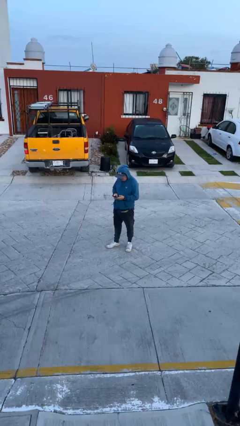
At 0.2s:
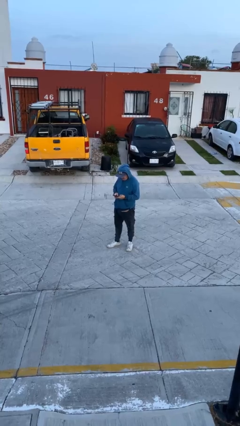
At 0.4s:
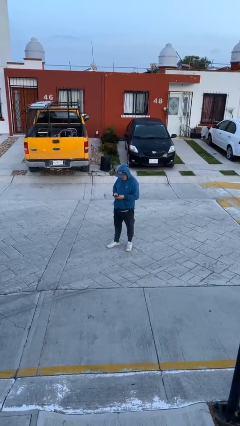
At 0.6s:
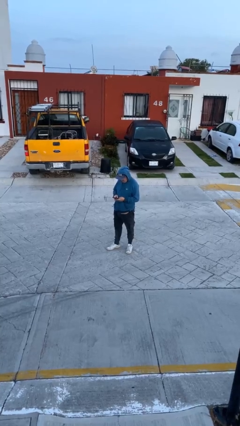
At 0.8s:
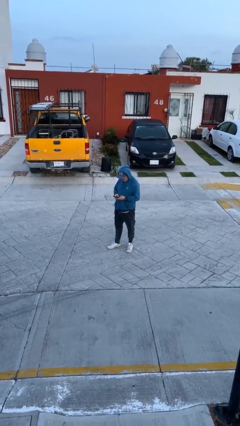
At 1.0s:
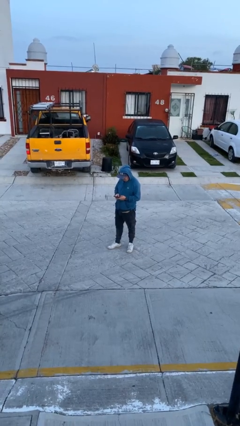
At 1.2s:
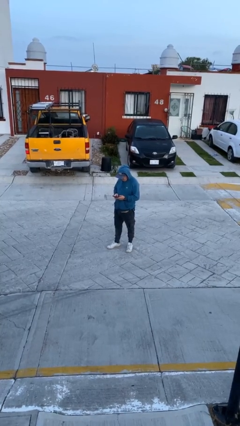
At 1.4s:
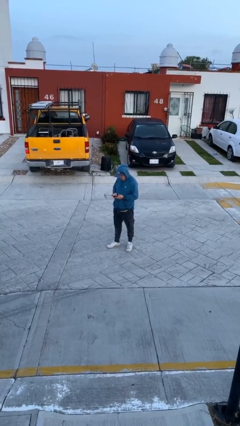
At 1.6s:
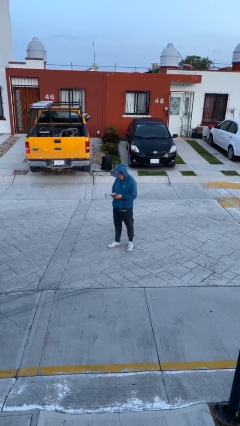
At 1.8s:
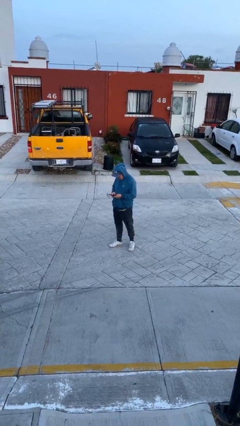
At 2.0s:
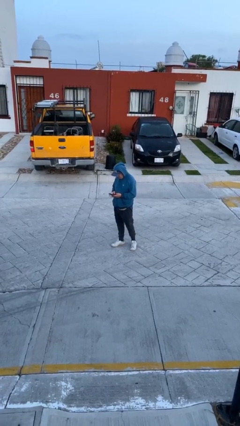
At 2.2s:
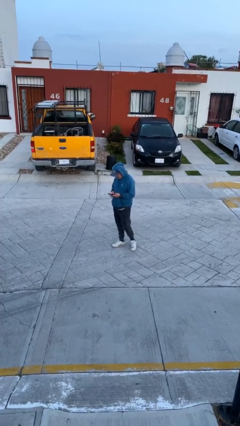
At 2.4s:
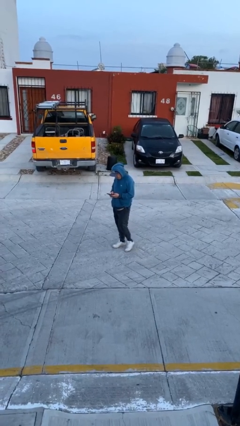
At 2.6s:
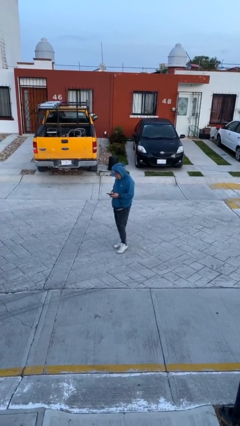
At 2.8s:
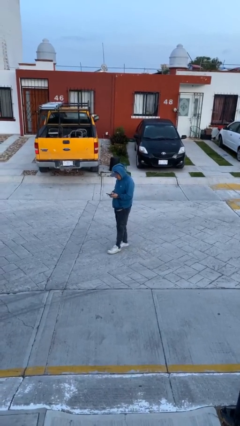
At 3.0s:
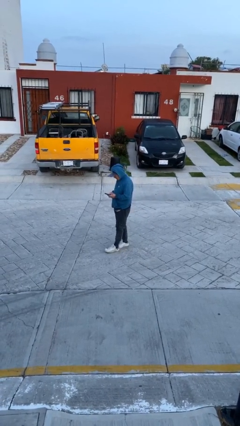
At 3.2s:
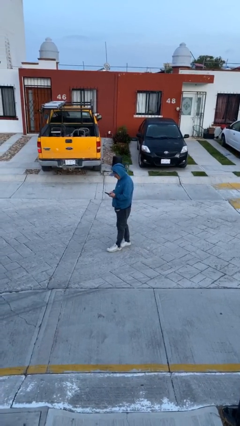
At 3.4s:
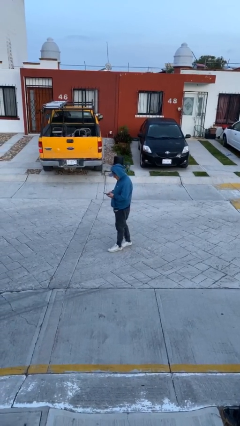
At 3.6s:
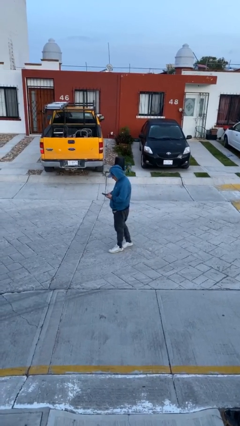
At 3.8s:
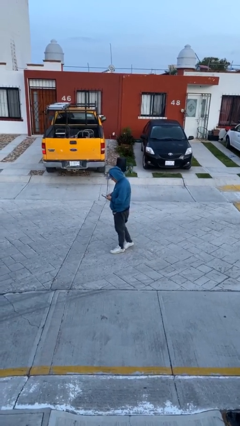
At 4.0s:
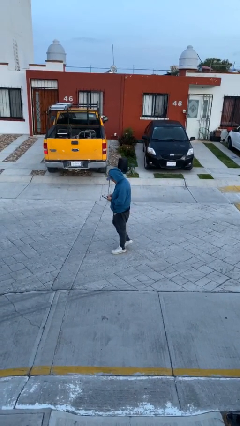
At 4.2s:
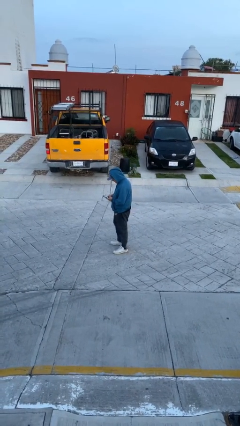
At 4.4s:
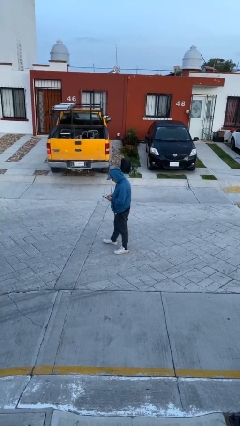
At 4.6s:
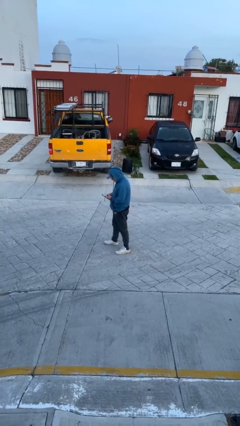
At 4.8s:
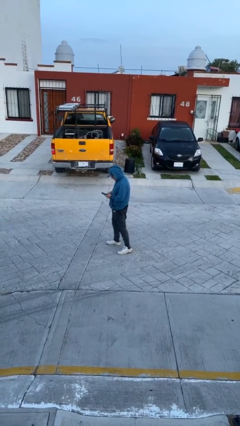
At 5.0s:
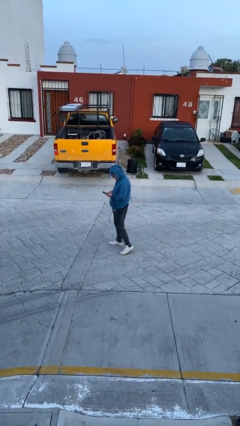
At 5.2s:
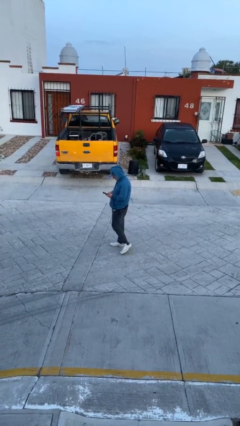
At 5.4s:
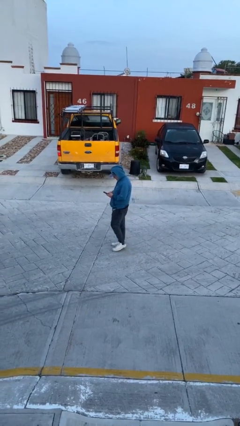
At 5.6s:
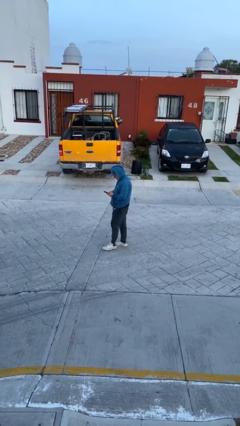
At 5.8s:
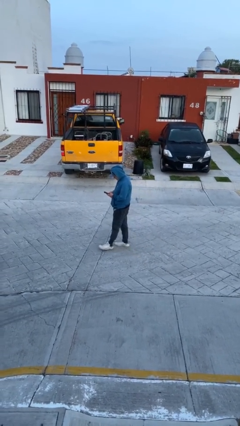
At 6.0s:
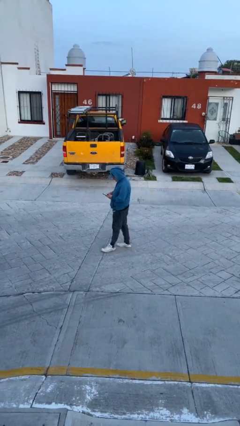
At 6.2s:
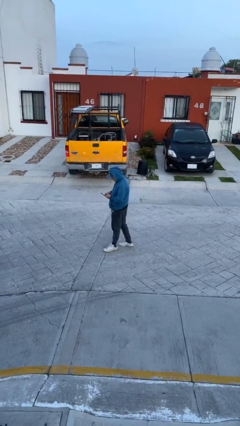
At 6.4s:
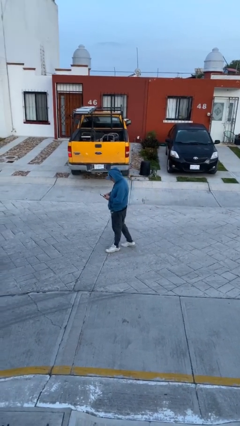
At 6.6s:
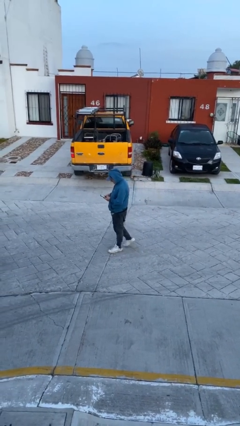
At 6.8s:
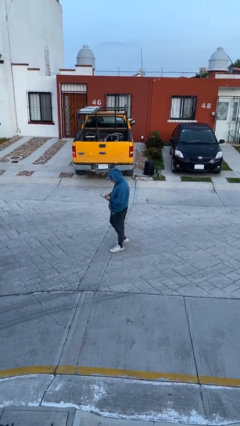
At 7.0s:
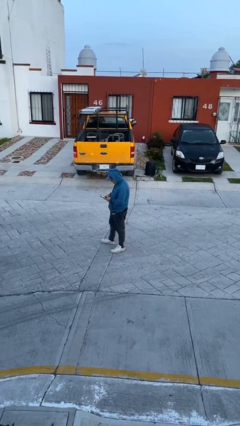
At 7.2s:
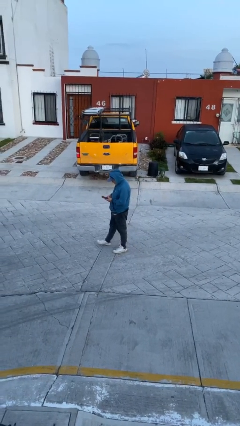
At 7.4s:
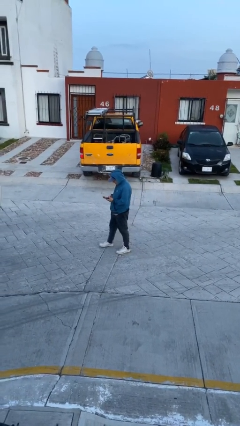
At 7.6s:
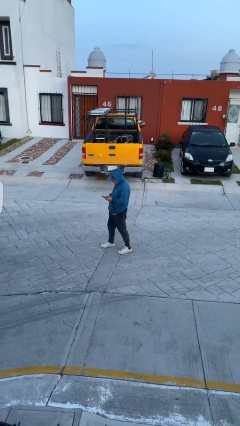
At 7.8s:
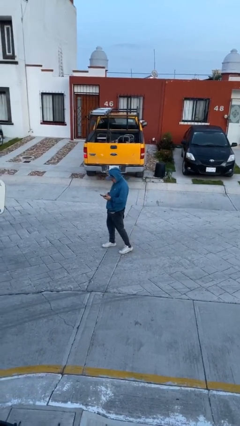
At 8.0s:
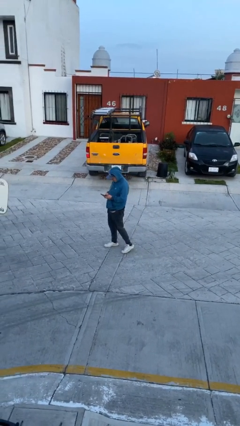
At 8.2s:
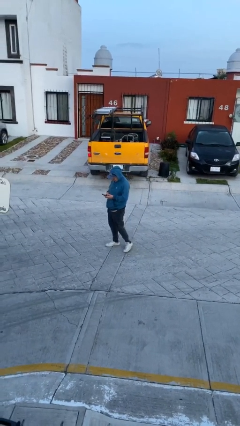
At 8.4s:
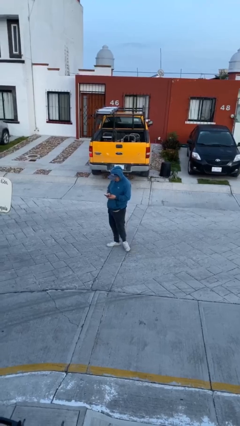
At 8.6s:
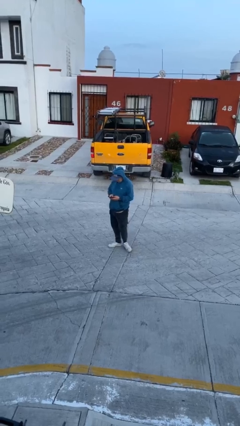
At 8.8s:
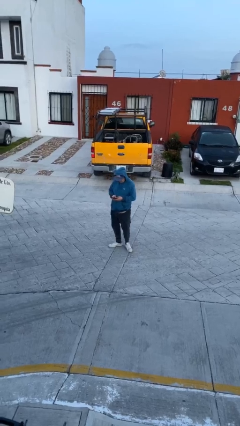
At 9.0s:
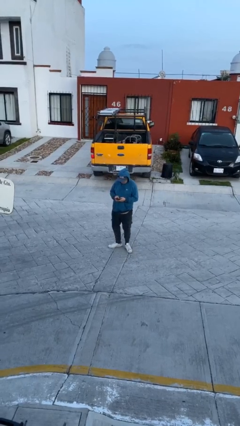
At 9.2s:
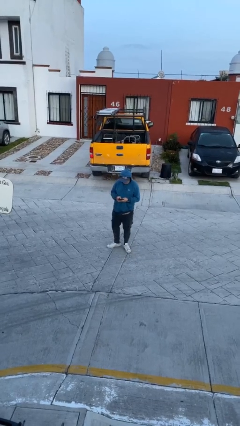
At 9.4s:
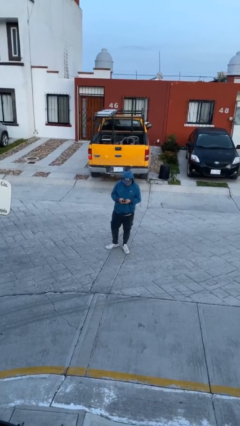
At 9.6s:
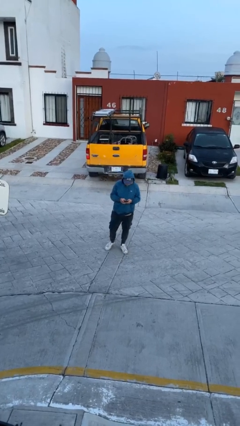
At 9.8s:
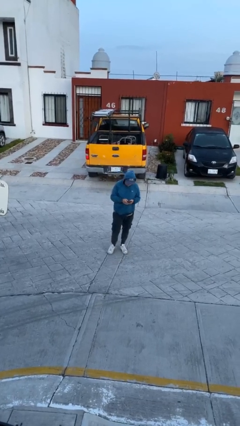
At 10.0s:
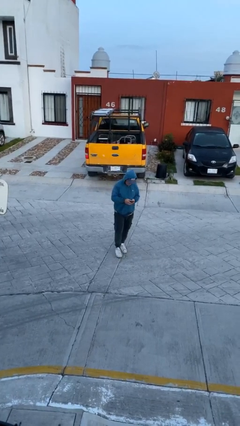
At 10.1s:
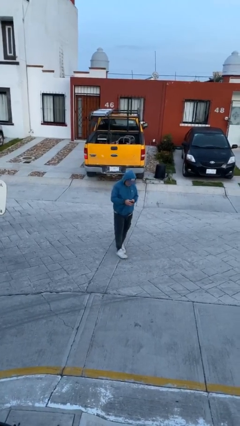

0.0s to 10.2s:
person texts on phone

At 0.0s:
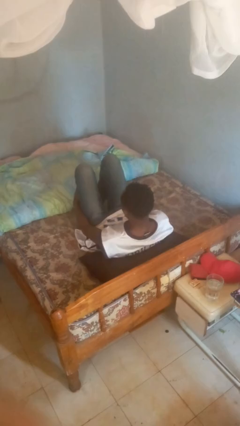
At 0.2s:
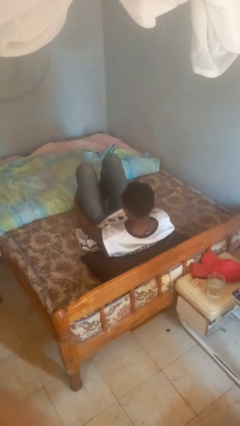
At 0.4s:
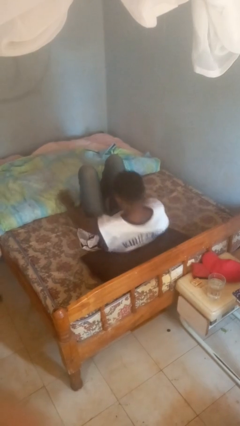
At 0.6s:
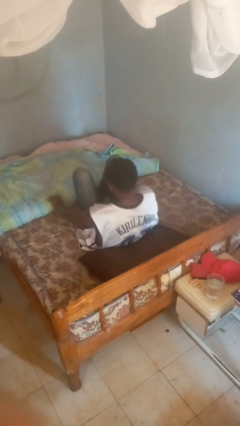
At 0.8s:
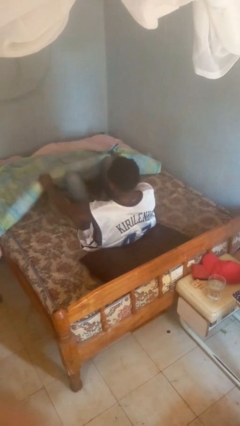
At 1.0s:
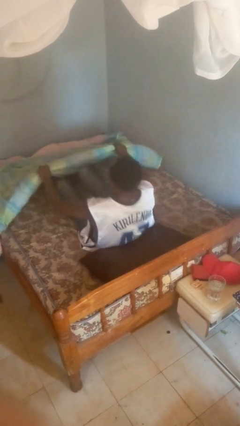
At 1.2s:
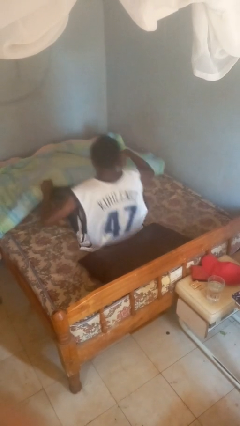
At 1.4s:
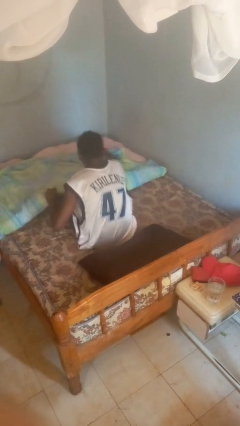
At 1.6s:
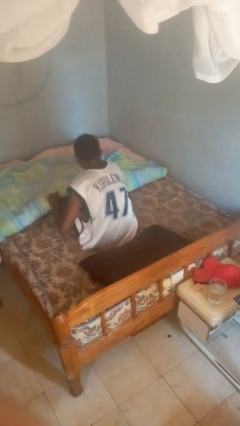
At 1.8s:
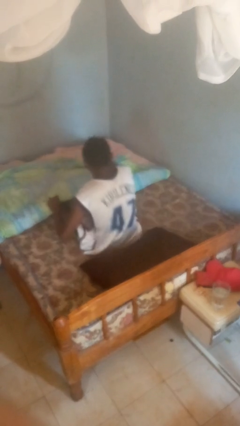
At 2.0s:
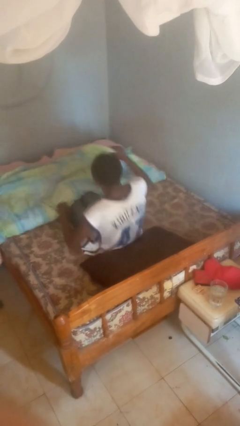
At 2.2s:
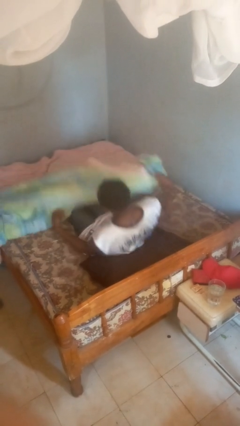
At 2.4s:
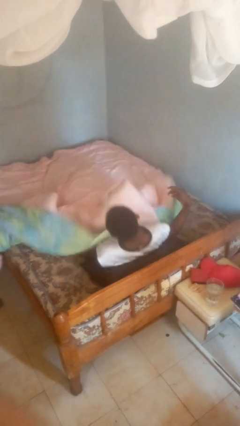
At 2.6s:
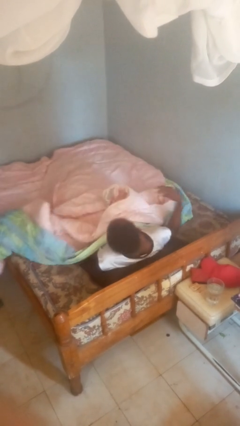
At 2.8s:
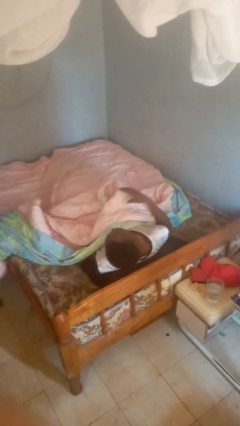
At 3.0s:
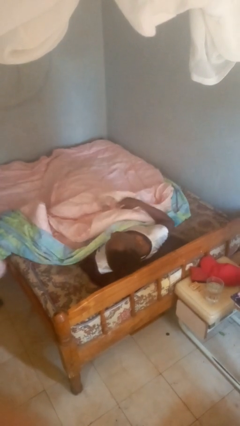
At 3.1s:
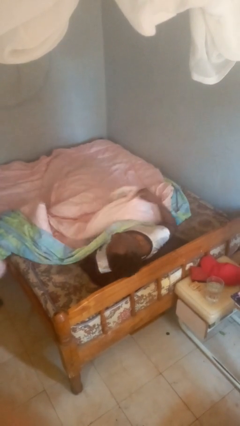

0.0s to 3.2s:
person covers with bedsheets

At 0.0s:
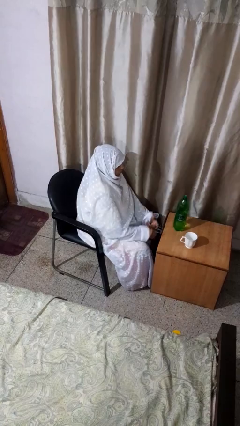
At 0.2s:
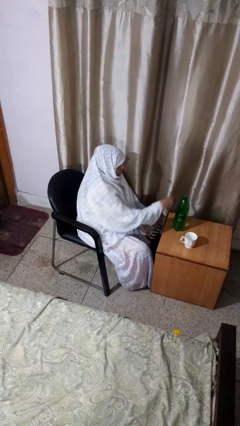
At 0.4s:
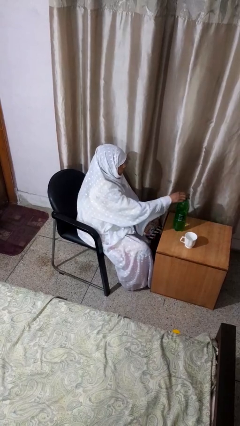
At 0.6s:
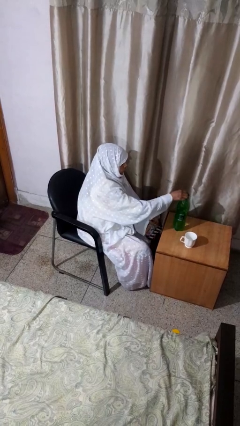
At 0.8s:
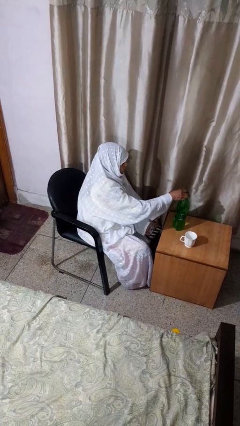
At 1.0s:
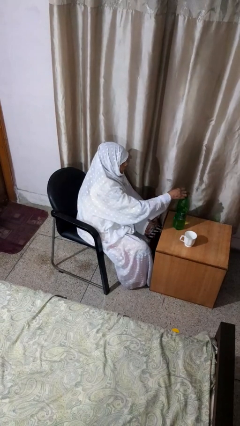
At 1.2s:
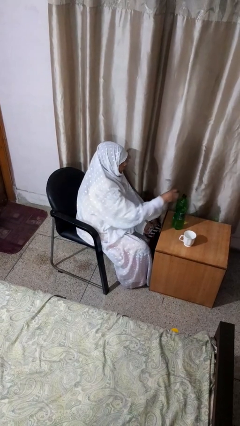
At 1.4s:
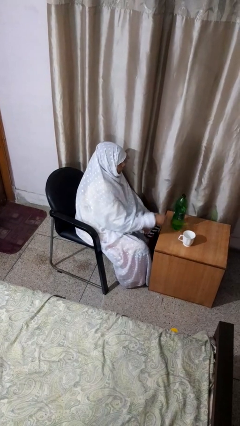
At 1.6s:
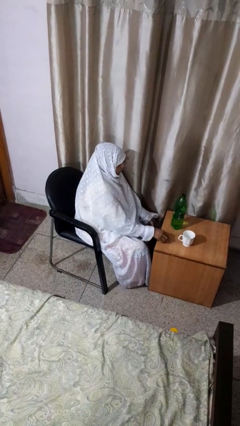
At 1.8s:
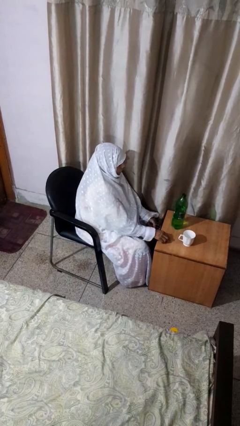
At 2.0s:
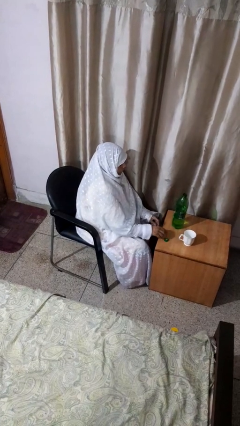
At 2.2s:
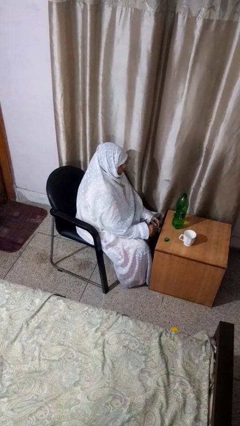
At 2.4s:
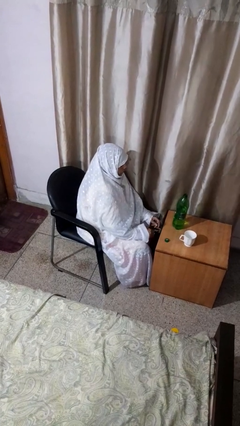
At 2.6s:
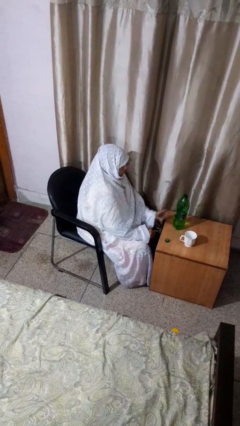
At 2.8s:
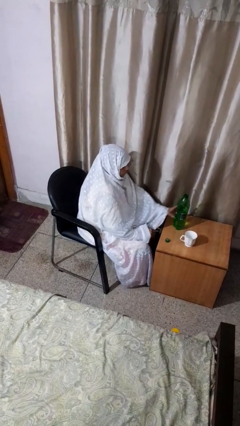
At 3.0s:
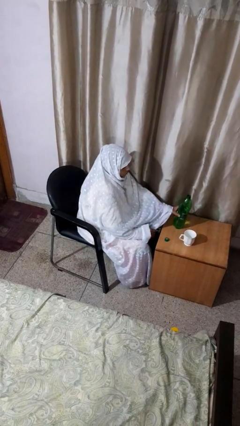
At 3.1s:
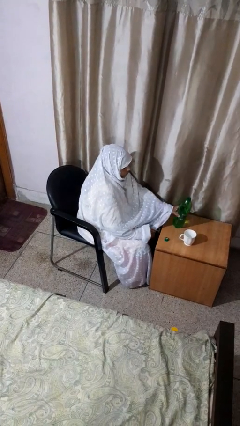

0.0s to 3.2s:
person unscrews lid from bottle

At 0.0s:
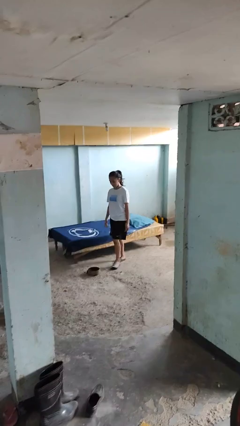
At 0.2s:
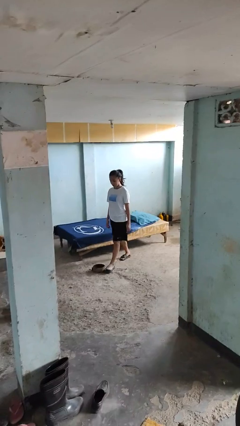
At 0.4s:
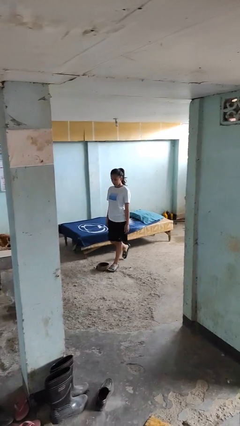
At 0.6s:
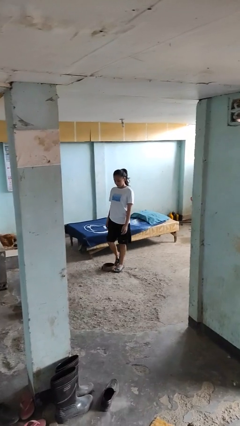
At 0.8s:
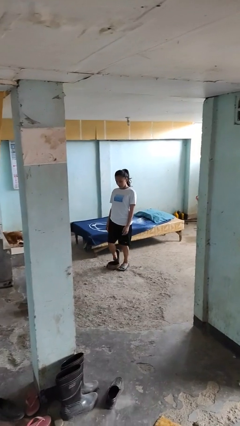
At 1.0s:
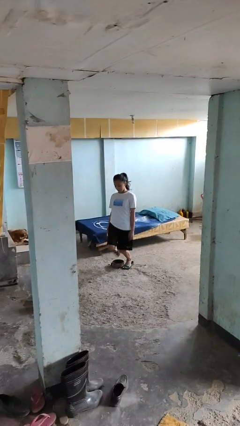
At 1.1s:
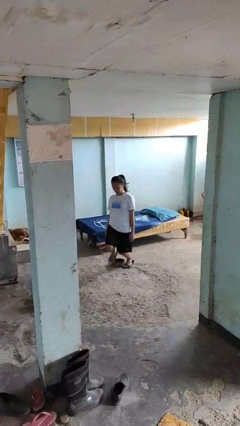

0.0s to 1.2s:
person trips on object on floor

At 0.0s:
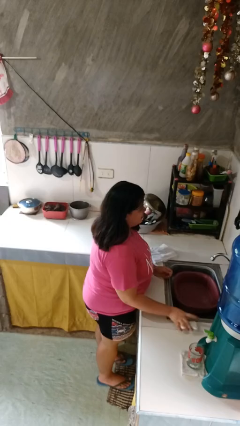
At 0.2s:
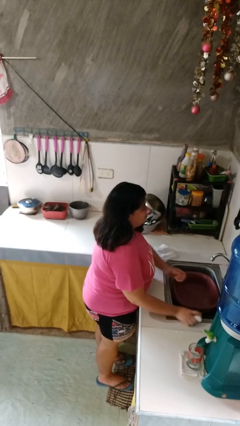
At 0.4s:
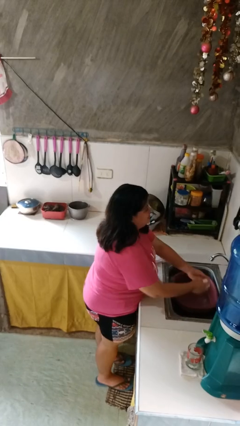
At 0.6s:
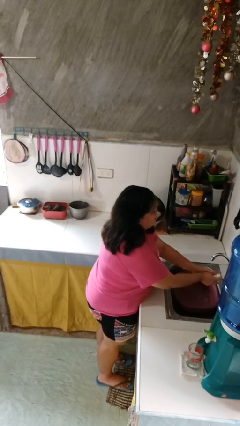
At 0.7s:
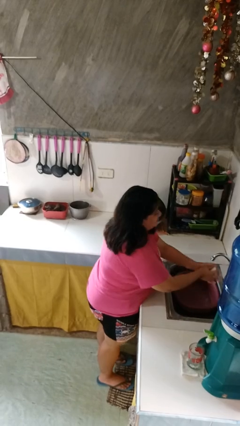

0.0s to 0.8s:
person washes hands
